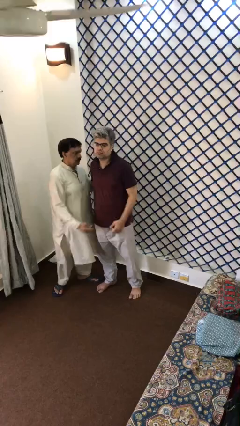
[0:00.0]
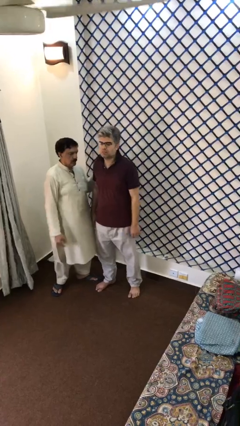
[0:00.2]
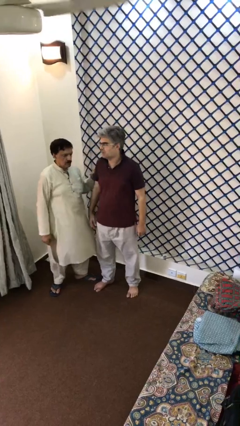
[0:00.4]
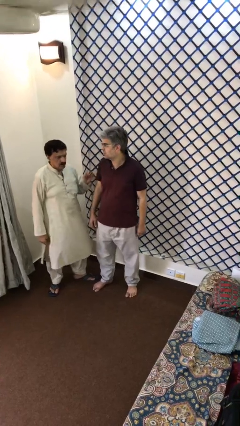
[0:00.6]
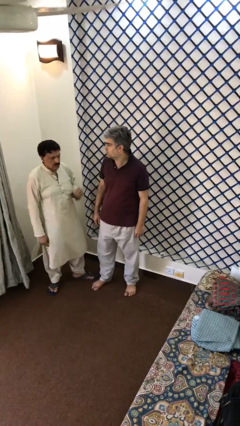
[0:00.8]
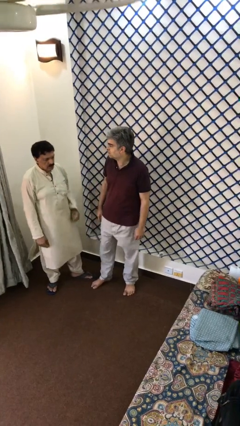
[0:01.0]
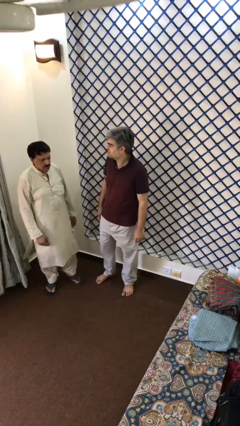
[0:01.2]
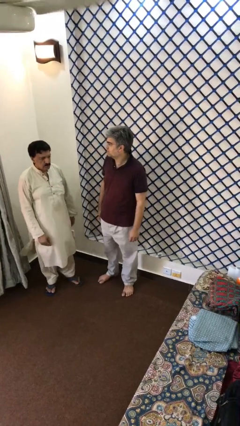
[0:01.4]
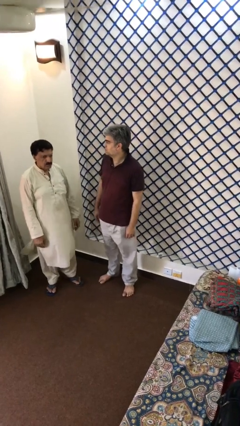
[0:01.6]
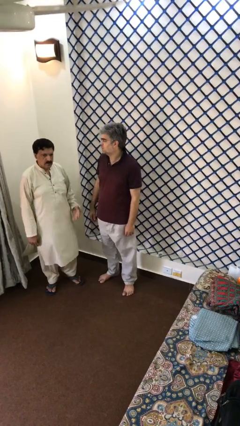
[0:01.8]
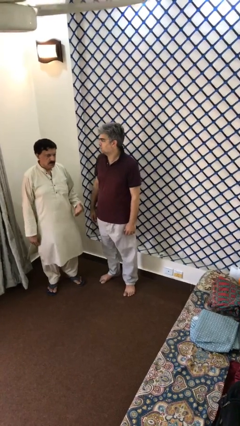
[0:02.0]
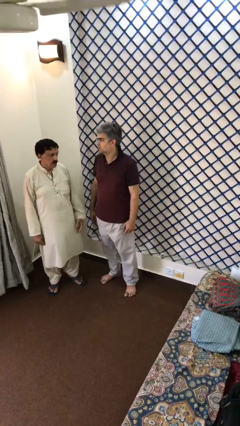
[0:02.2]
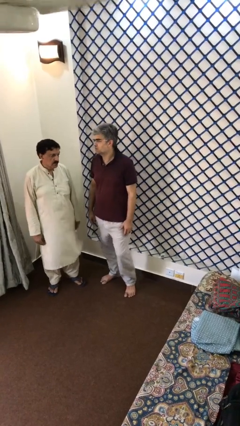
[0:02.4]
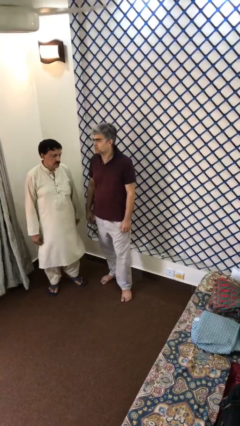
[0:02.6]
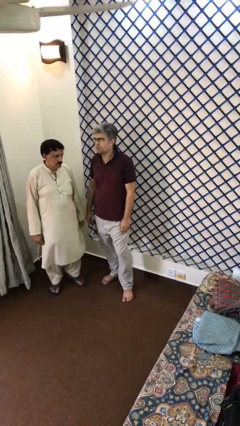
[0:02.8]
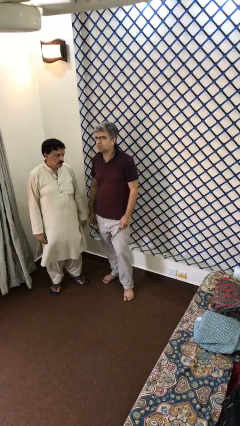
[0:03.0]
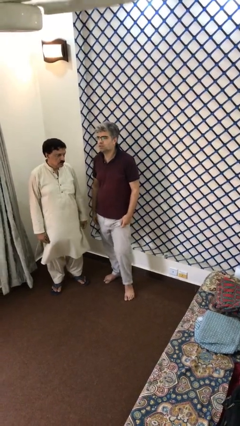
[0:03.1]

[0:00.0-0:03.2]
person talks to person

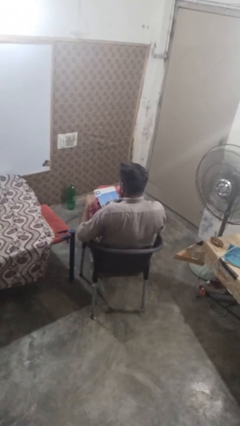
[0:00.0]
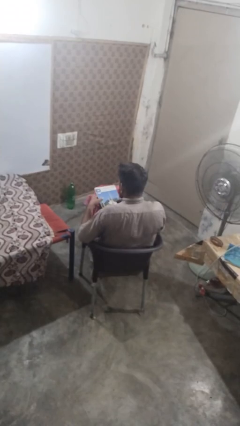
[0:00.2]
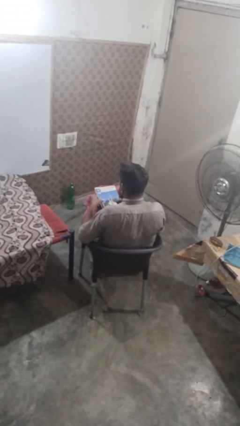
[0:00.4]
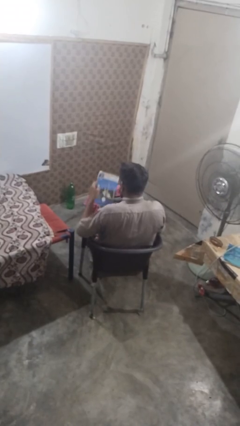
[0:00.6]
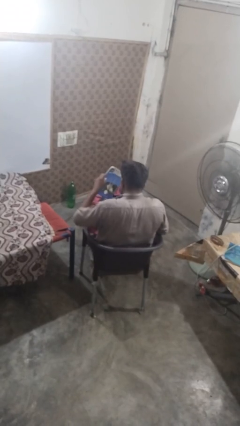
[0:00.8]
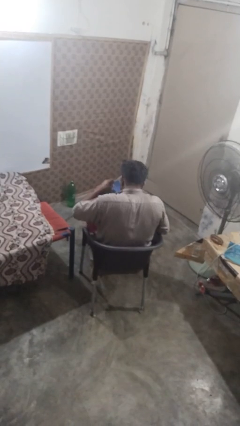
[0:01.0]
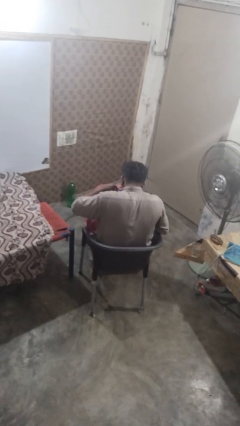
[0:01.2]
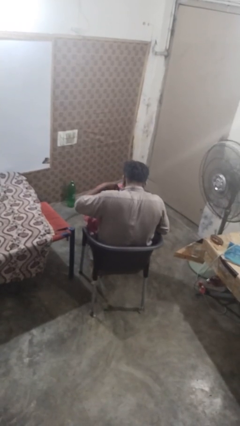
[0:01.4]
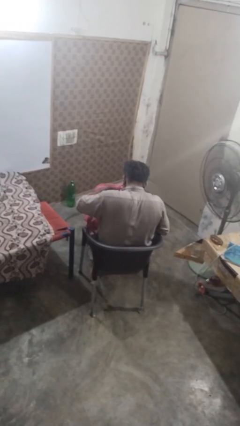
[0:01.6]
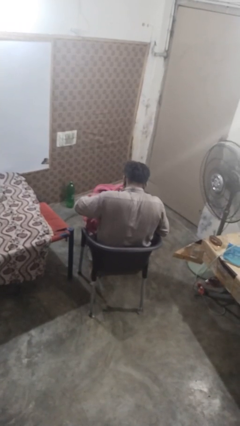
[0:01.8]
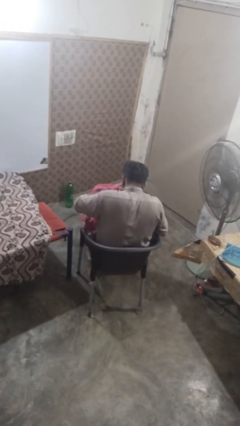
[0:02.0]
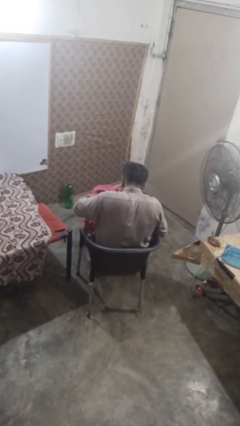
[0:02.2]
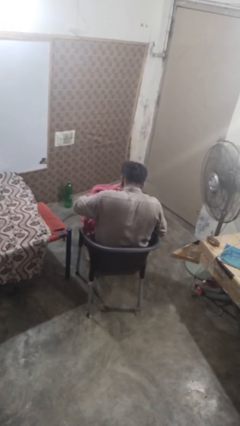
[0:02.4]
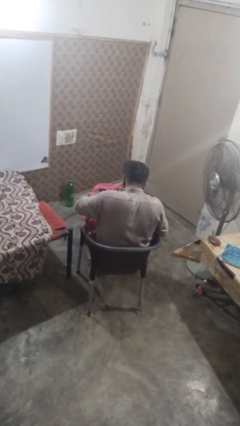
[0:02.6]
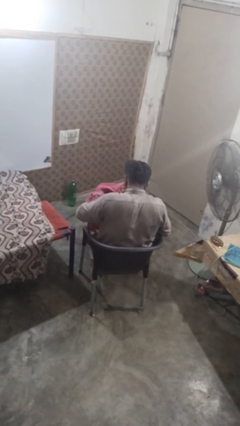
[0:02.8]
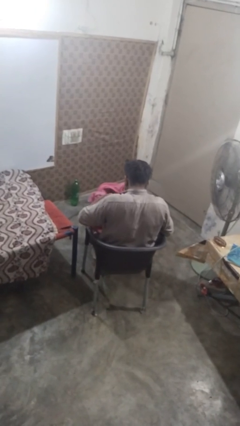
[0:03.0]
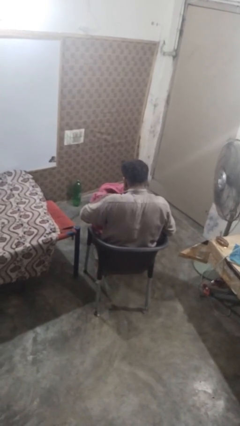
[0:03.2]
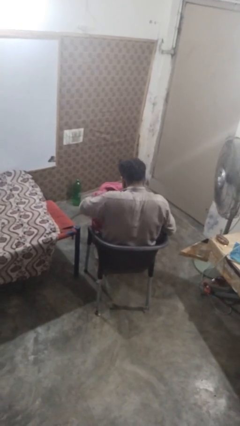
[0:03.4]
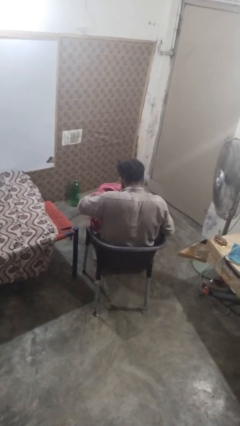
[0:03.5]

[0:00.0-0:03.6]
person puts object into backpack

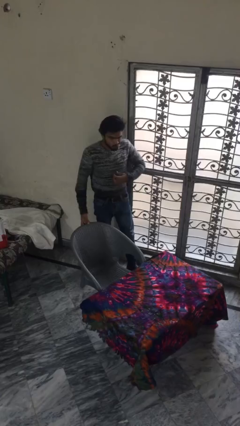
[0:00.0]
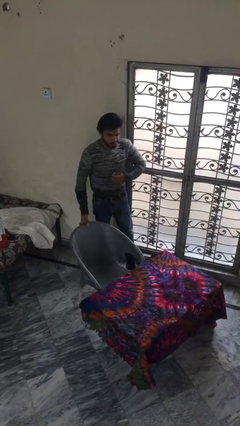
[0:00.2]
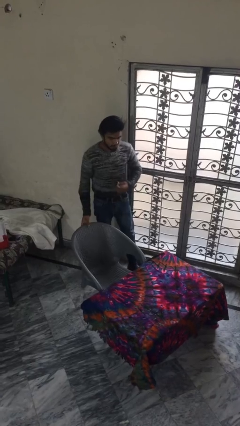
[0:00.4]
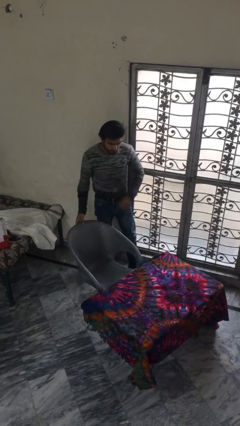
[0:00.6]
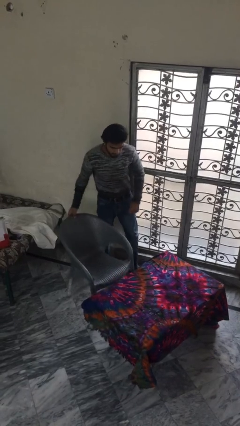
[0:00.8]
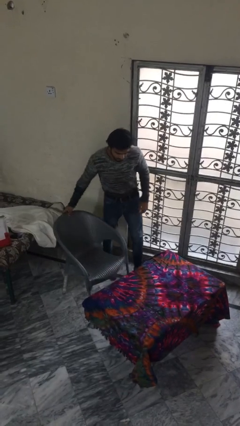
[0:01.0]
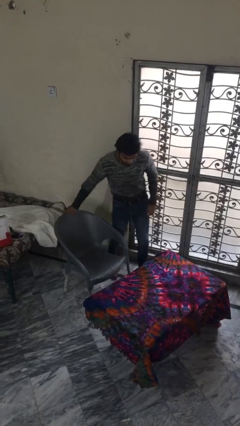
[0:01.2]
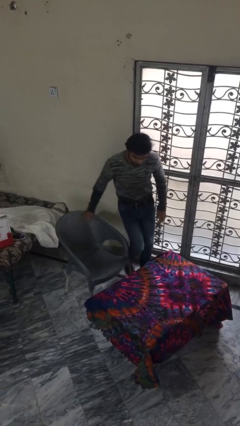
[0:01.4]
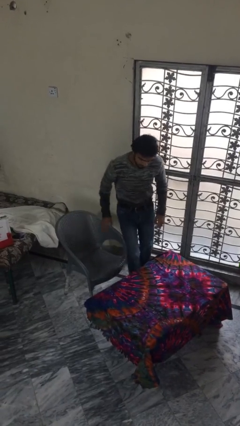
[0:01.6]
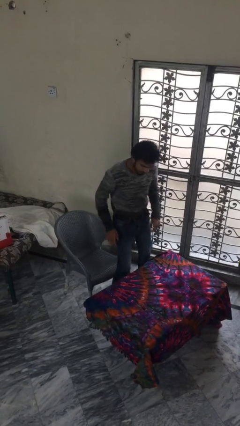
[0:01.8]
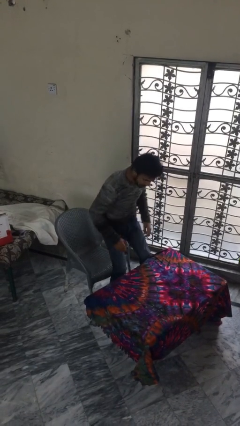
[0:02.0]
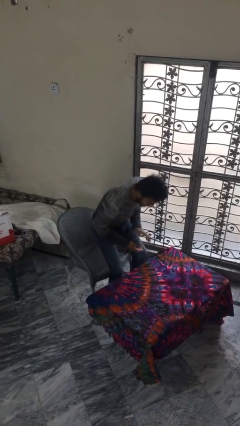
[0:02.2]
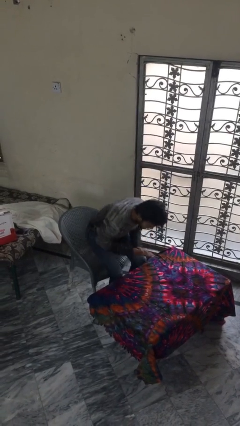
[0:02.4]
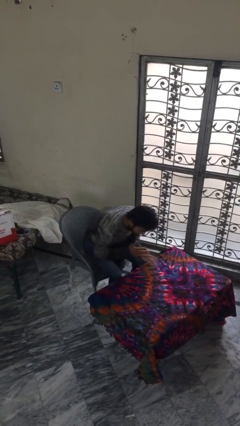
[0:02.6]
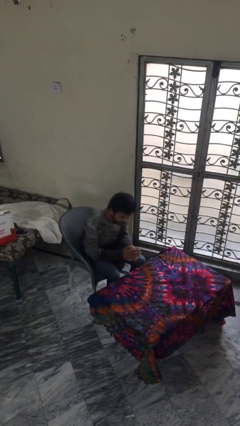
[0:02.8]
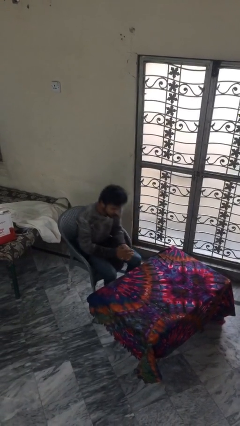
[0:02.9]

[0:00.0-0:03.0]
person sits down

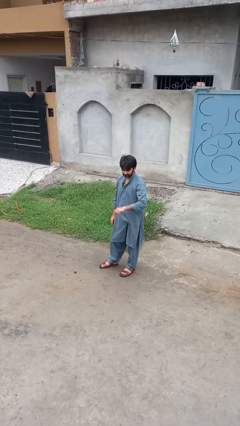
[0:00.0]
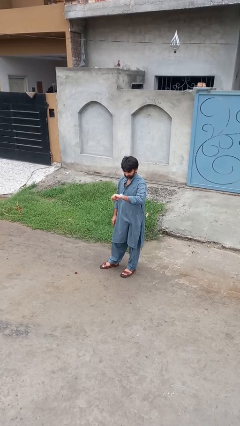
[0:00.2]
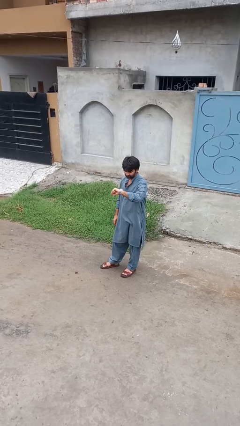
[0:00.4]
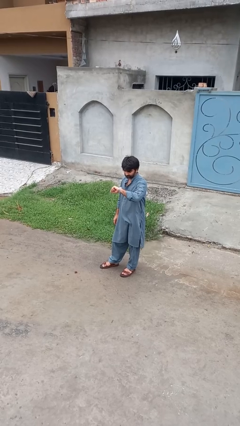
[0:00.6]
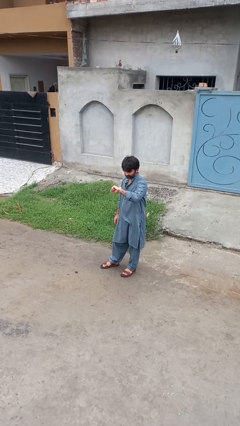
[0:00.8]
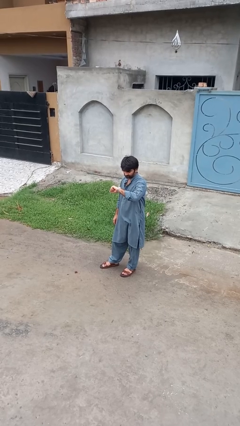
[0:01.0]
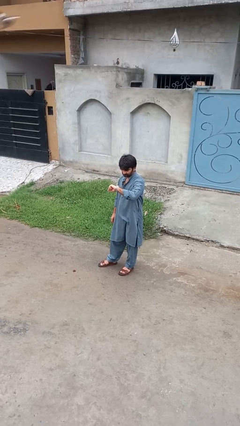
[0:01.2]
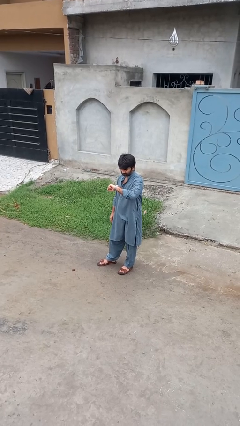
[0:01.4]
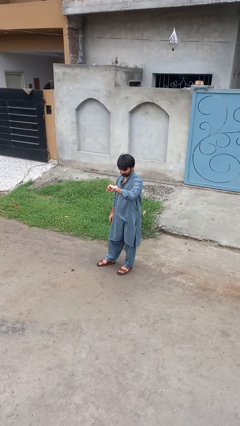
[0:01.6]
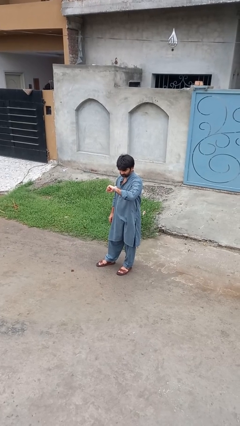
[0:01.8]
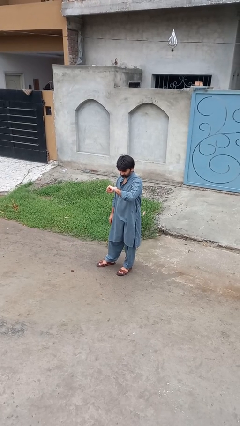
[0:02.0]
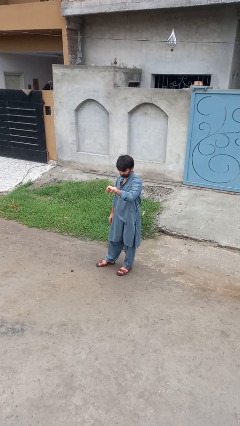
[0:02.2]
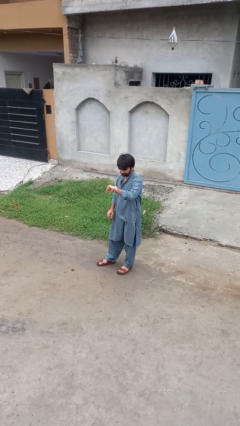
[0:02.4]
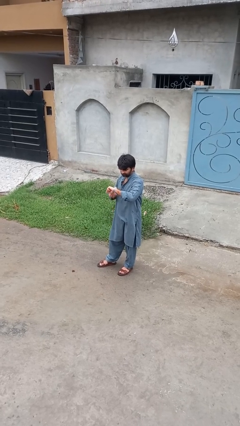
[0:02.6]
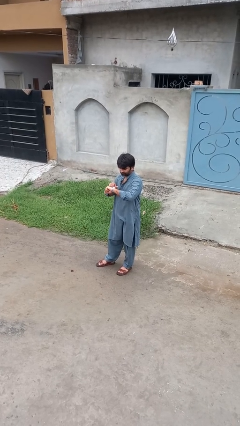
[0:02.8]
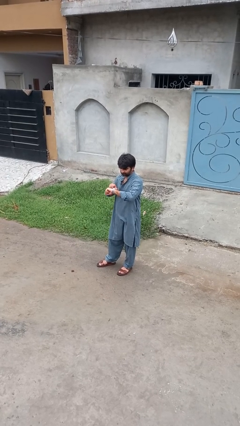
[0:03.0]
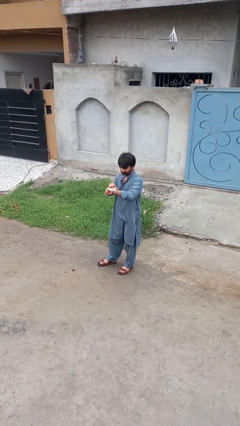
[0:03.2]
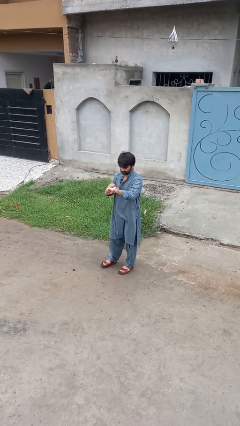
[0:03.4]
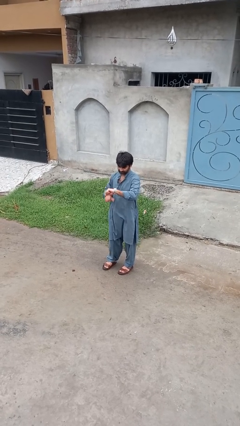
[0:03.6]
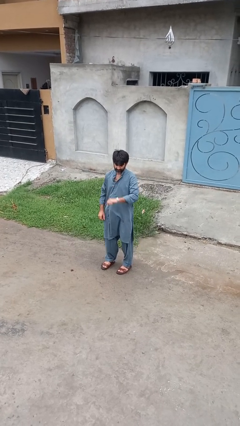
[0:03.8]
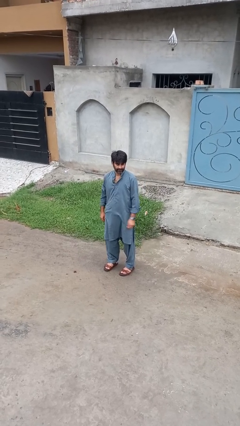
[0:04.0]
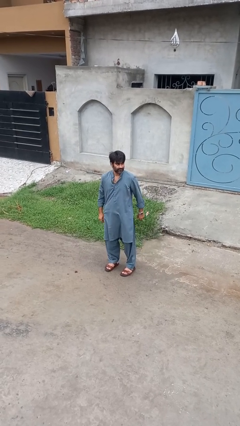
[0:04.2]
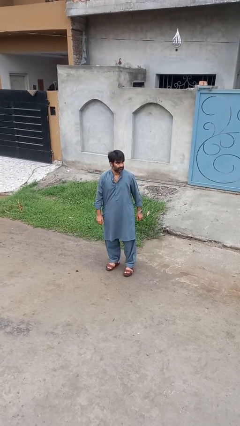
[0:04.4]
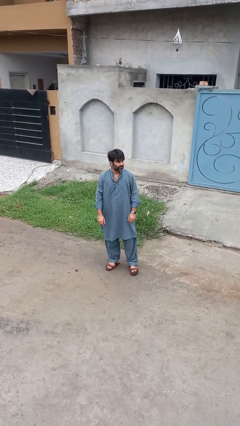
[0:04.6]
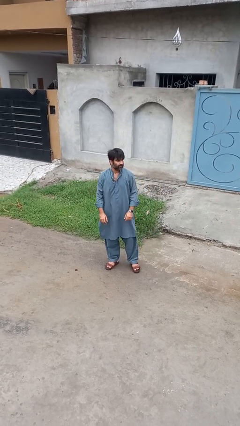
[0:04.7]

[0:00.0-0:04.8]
person looks at wristwatch

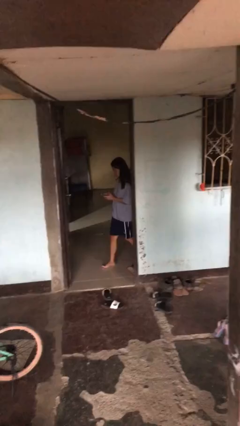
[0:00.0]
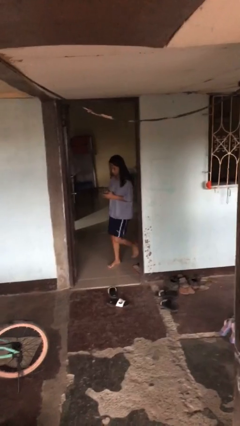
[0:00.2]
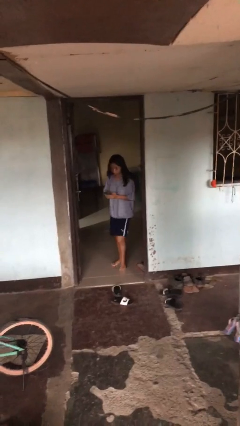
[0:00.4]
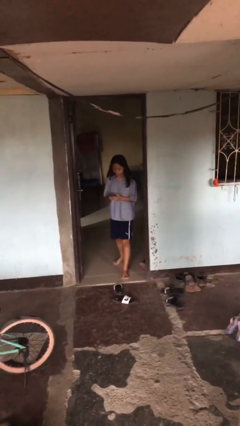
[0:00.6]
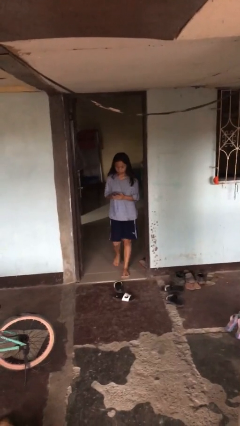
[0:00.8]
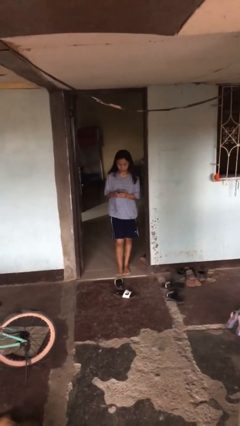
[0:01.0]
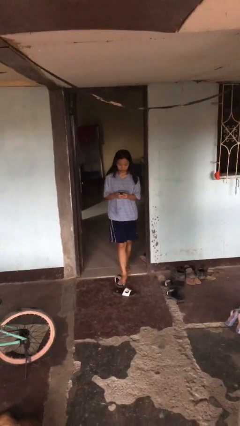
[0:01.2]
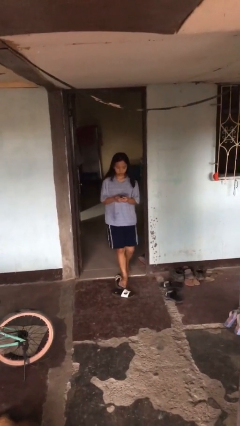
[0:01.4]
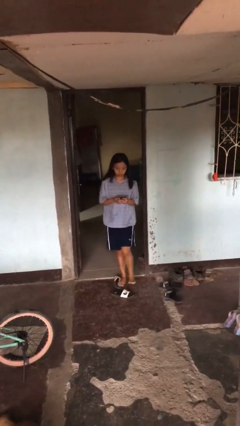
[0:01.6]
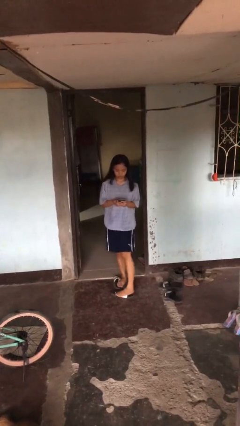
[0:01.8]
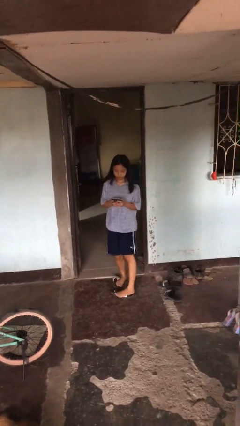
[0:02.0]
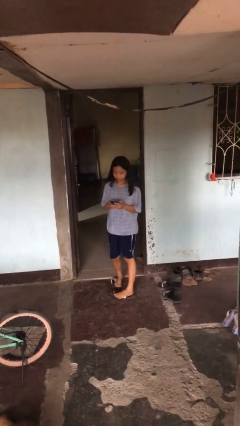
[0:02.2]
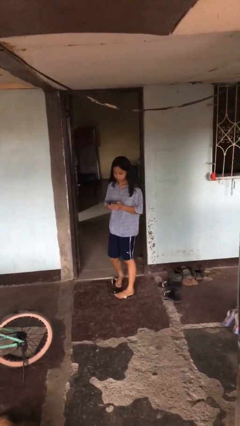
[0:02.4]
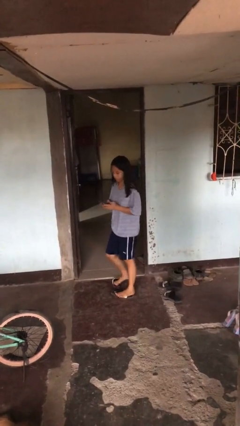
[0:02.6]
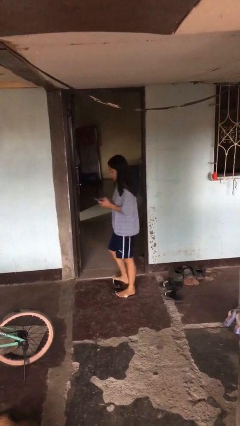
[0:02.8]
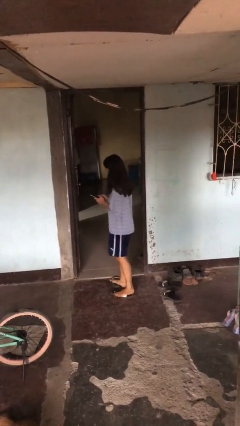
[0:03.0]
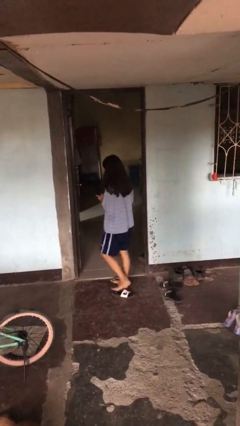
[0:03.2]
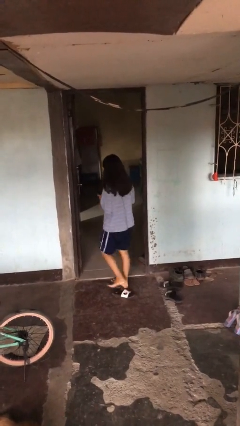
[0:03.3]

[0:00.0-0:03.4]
person enters scene through structure
